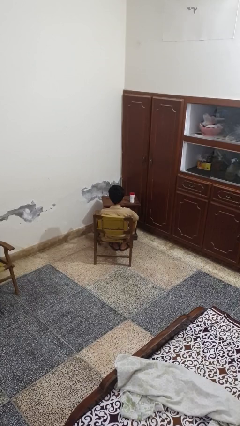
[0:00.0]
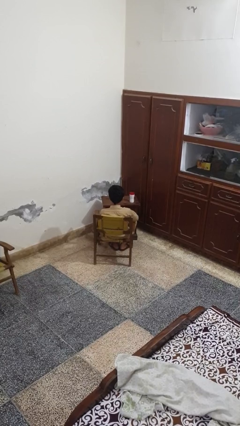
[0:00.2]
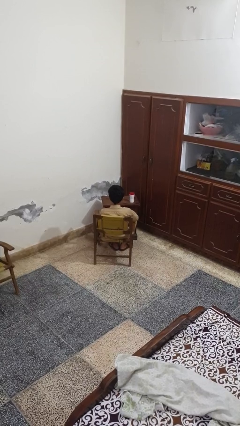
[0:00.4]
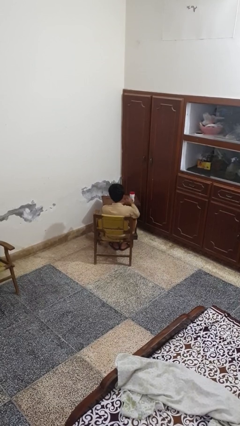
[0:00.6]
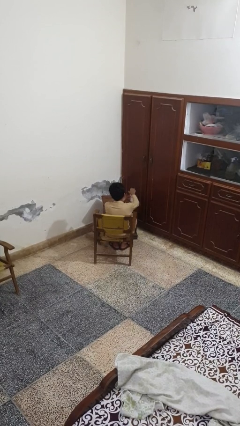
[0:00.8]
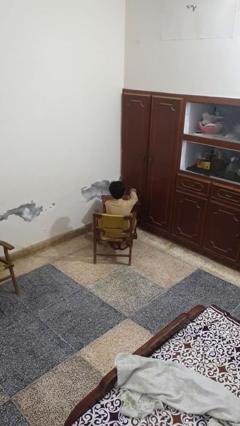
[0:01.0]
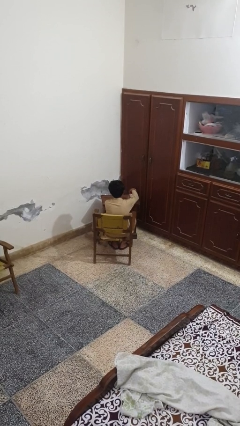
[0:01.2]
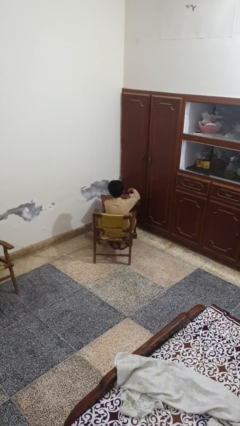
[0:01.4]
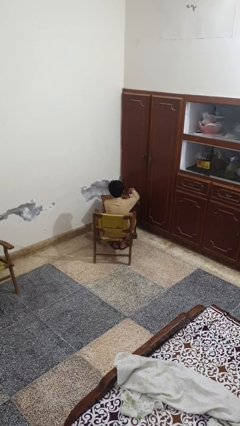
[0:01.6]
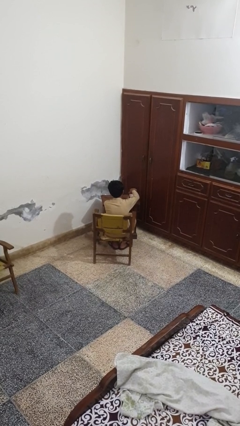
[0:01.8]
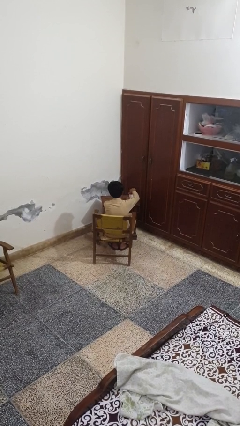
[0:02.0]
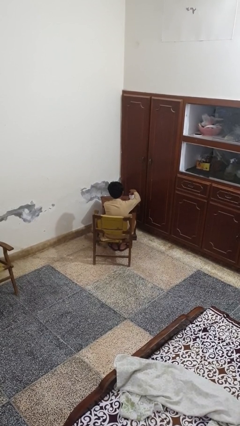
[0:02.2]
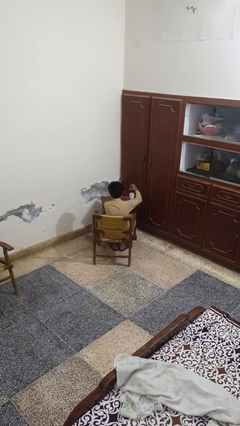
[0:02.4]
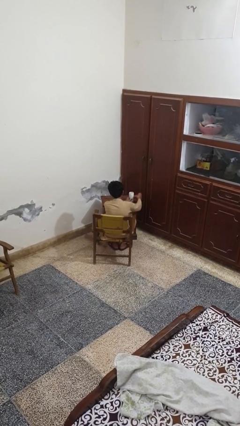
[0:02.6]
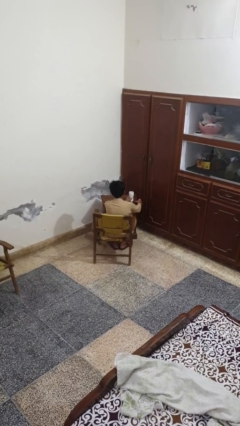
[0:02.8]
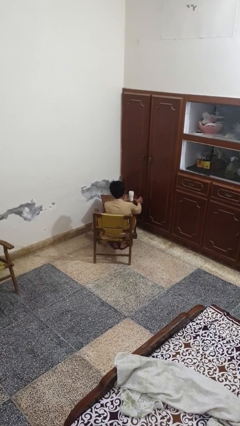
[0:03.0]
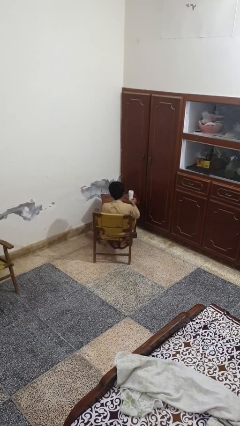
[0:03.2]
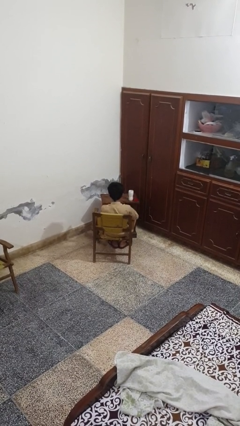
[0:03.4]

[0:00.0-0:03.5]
person opens jar

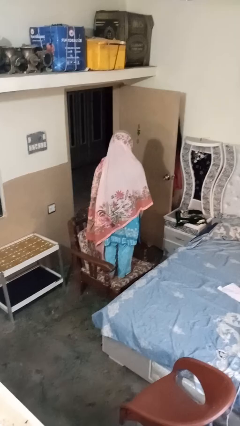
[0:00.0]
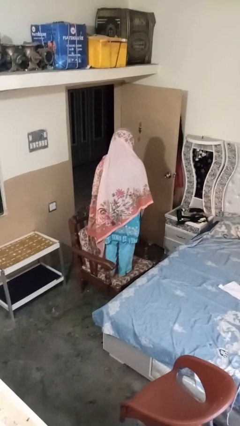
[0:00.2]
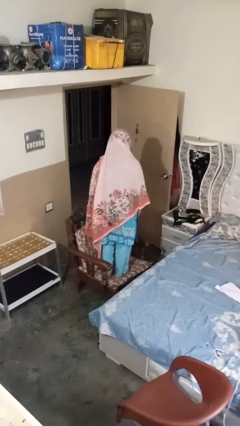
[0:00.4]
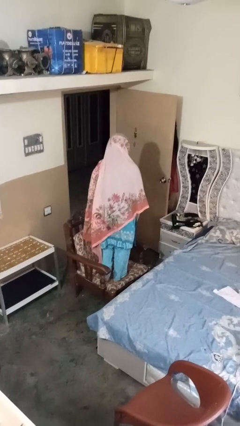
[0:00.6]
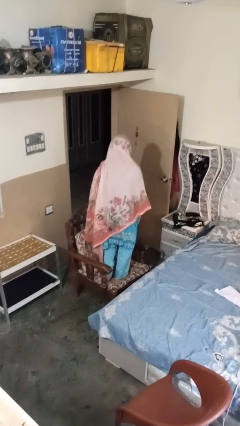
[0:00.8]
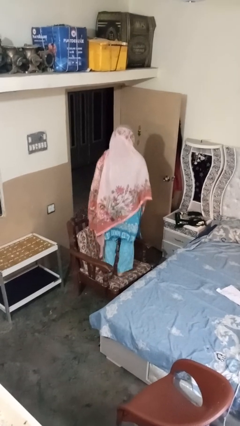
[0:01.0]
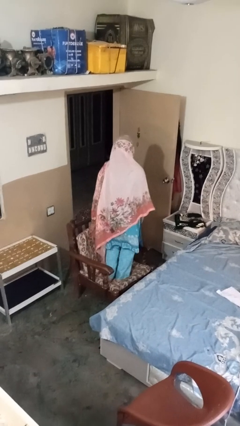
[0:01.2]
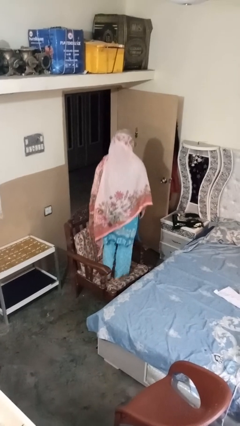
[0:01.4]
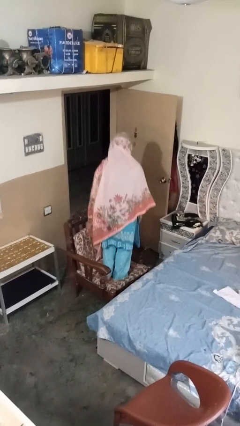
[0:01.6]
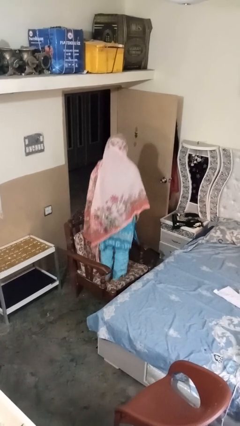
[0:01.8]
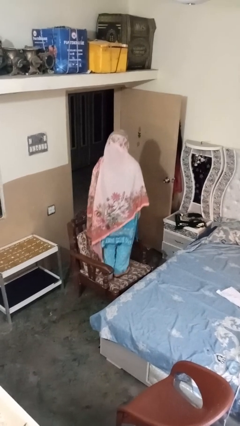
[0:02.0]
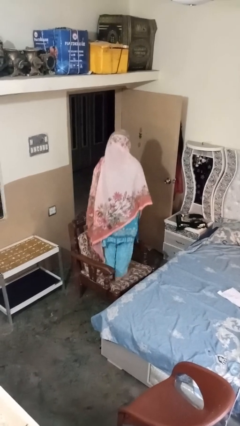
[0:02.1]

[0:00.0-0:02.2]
person jumps on couch

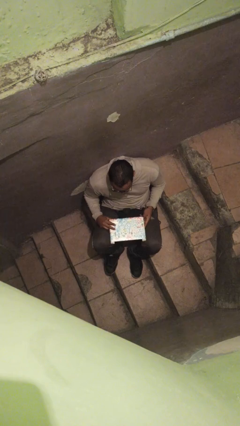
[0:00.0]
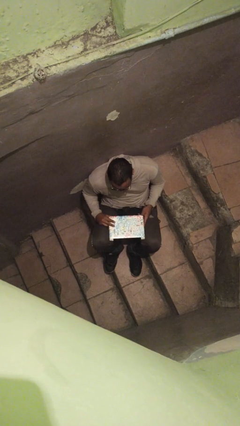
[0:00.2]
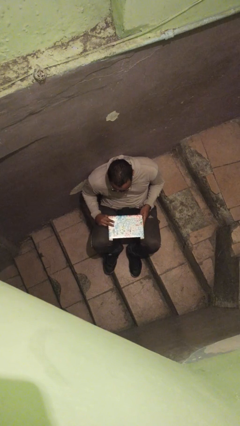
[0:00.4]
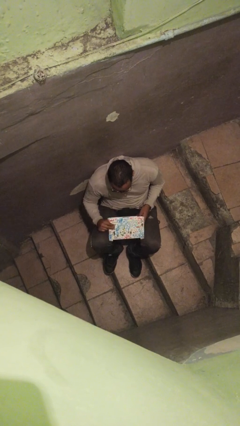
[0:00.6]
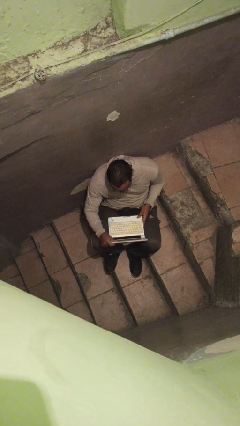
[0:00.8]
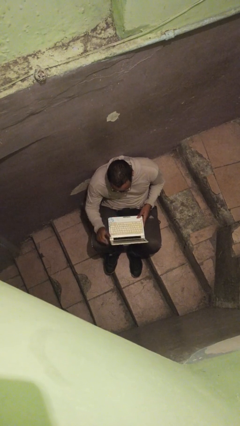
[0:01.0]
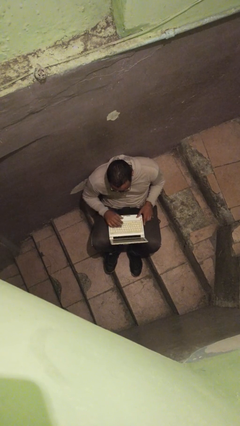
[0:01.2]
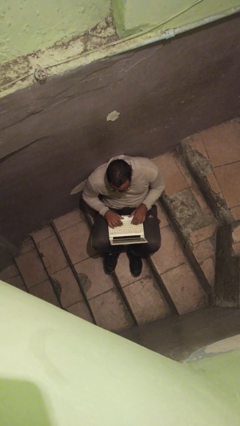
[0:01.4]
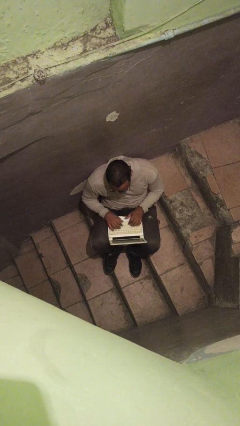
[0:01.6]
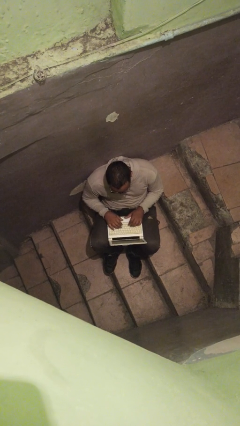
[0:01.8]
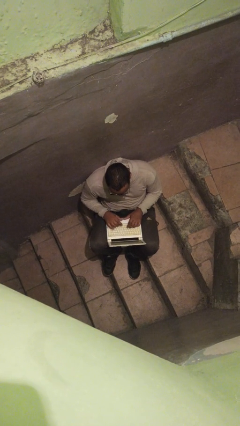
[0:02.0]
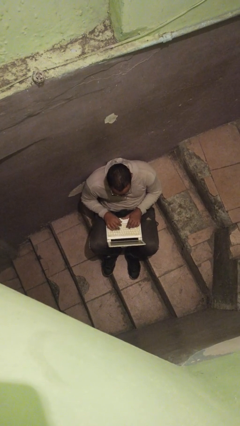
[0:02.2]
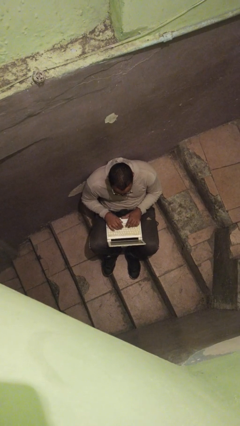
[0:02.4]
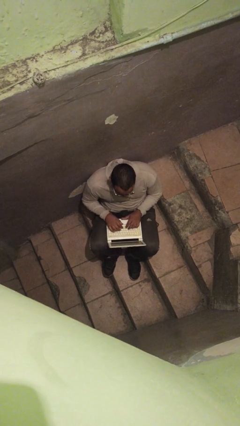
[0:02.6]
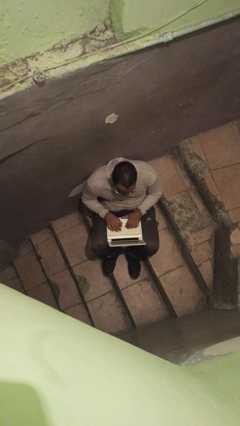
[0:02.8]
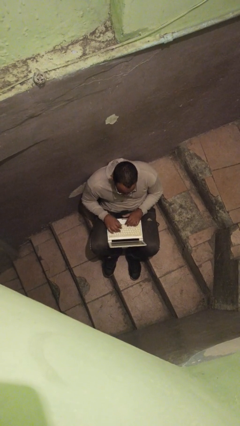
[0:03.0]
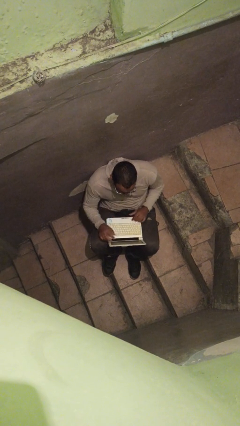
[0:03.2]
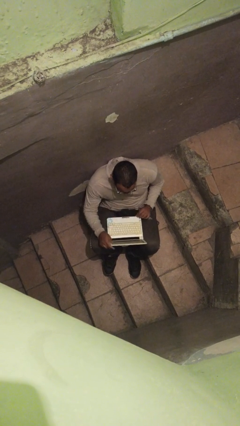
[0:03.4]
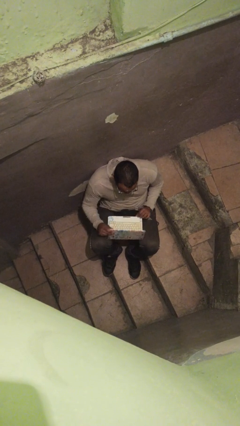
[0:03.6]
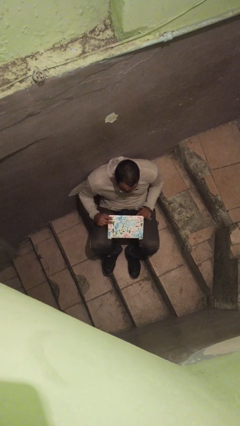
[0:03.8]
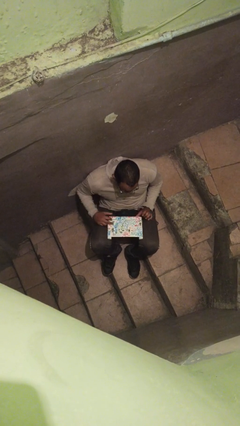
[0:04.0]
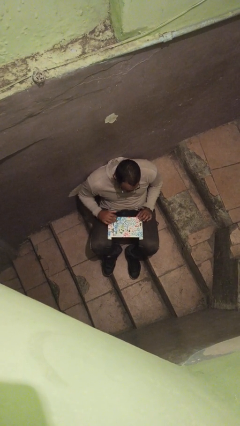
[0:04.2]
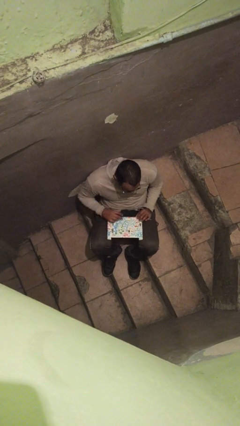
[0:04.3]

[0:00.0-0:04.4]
person interacts with laptop

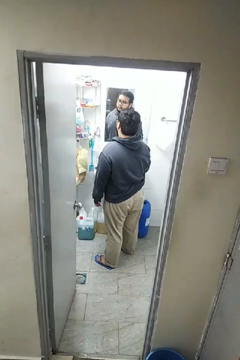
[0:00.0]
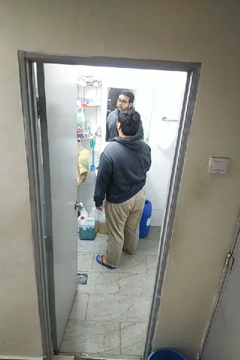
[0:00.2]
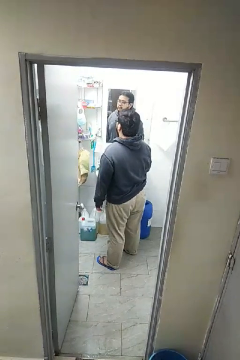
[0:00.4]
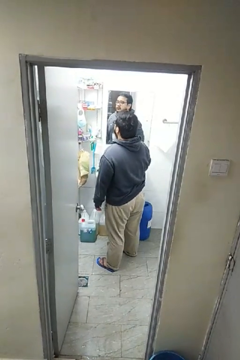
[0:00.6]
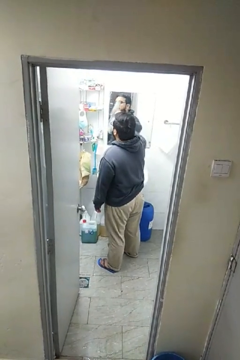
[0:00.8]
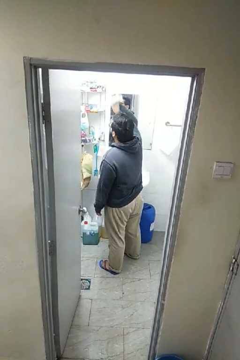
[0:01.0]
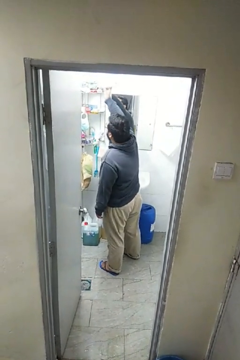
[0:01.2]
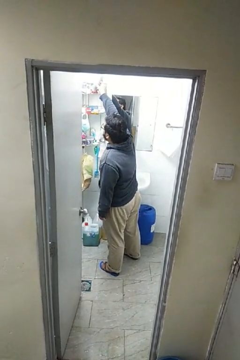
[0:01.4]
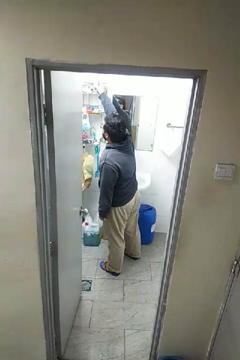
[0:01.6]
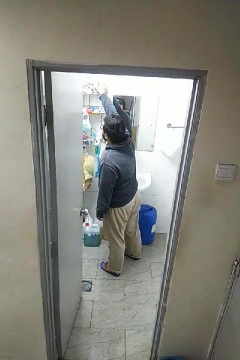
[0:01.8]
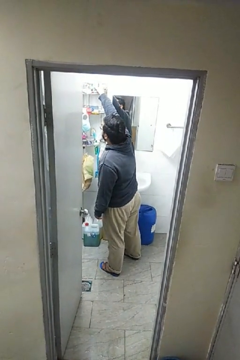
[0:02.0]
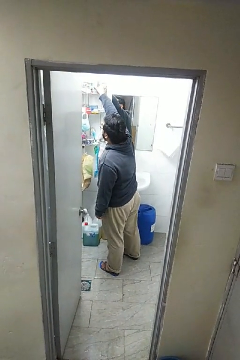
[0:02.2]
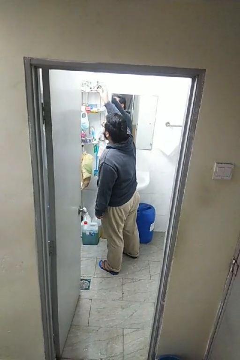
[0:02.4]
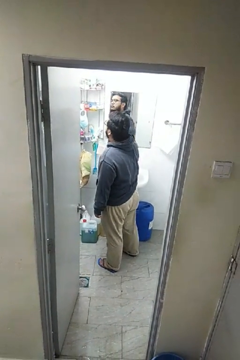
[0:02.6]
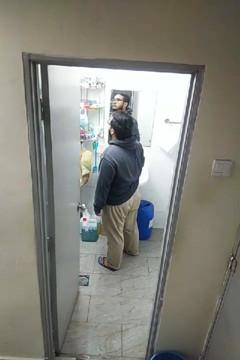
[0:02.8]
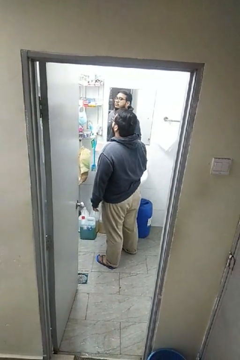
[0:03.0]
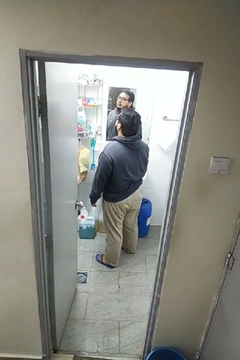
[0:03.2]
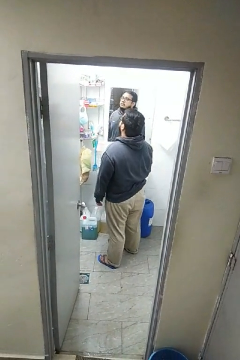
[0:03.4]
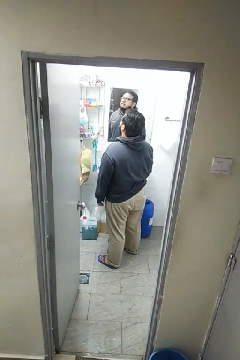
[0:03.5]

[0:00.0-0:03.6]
person puts down object on countertop

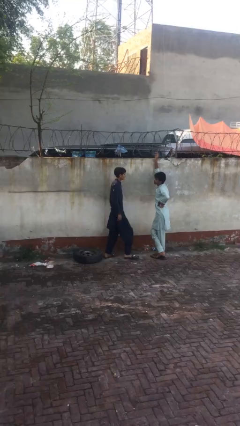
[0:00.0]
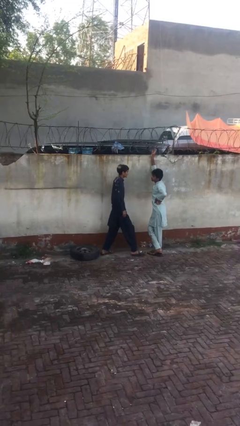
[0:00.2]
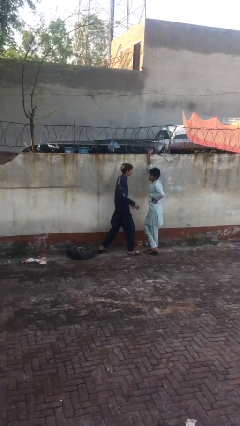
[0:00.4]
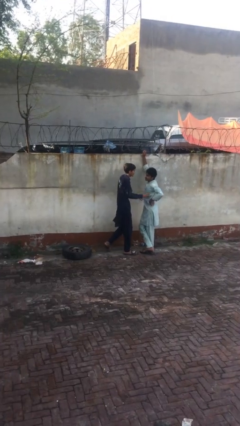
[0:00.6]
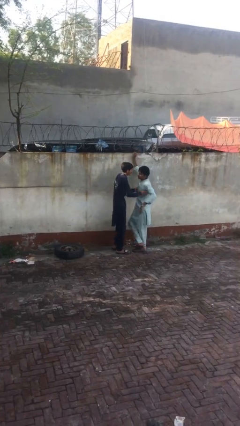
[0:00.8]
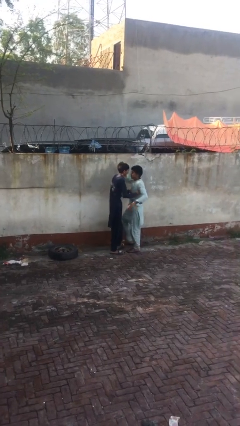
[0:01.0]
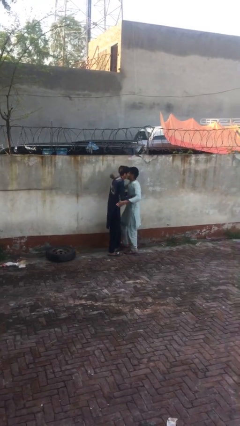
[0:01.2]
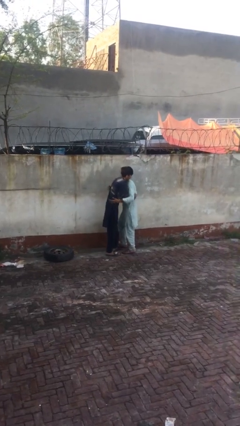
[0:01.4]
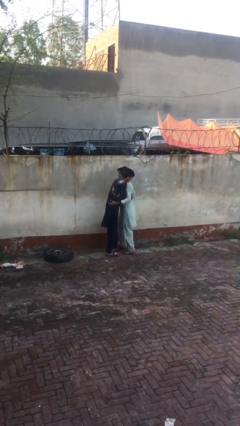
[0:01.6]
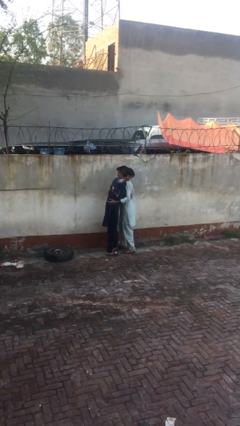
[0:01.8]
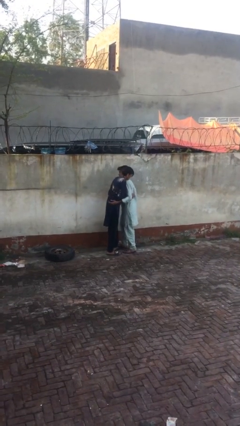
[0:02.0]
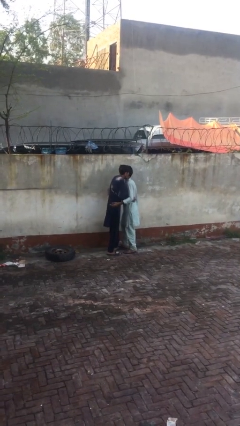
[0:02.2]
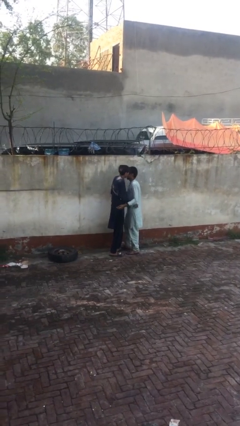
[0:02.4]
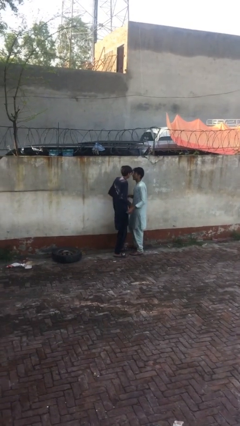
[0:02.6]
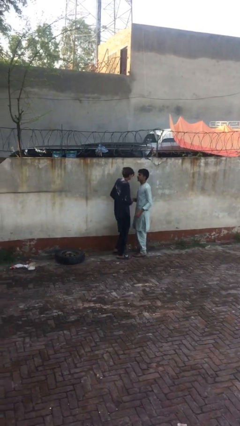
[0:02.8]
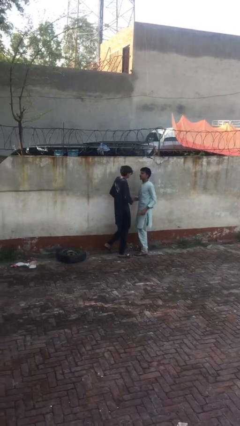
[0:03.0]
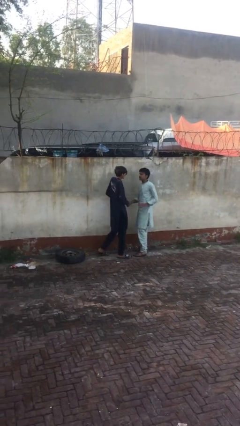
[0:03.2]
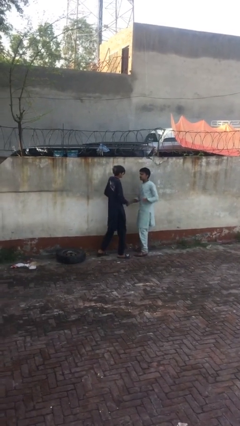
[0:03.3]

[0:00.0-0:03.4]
person embraces person

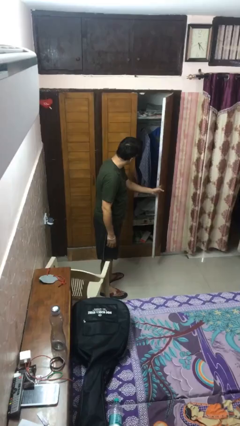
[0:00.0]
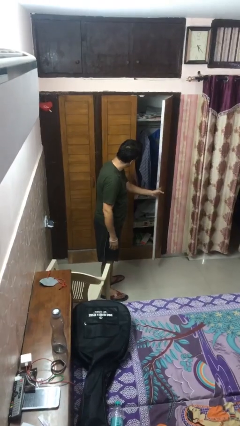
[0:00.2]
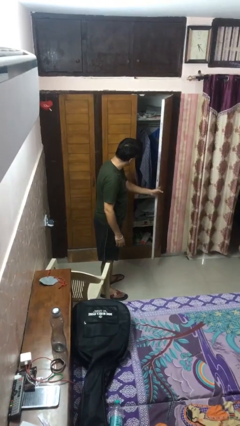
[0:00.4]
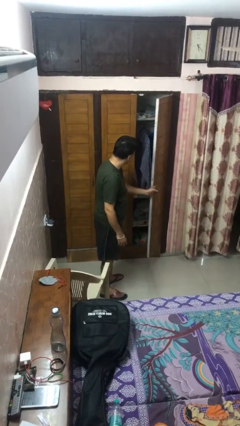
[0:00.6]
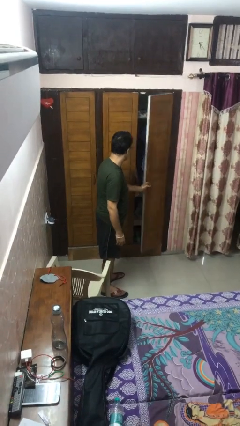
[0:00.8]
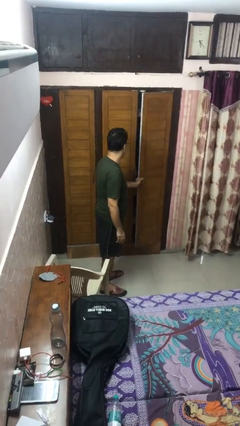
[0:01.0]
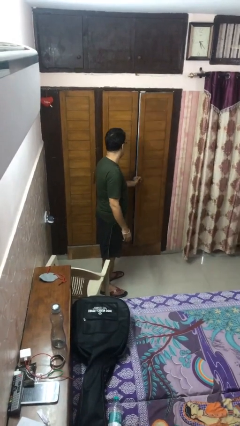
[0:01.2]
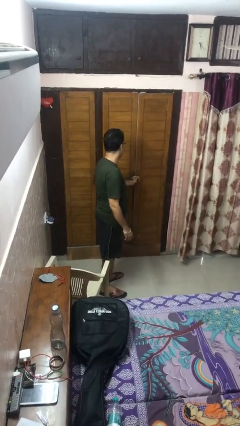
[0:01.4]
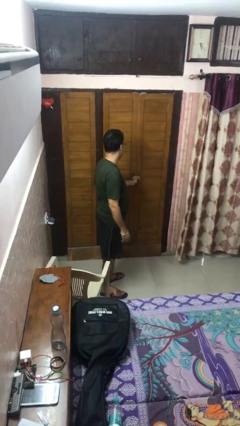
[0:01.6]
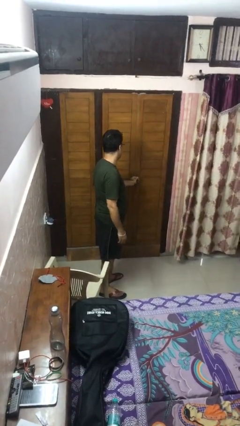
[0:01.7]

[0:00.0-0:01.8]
person closes closet door
